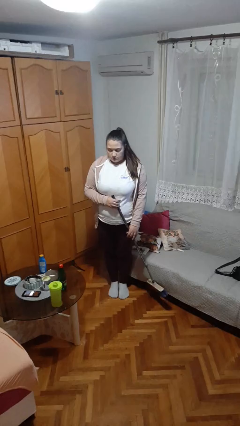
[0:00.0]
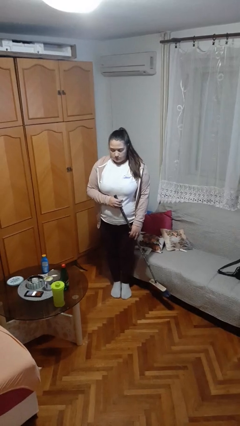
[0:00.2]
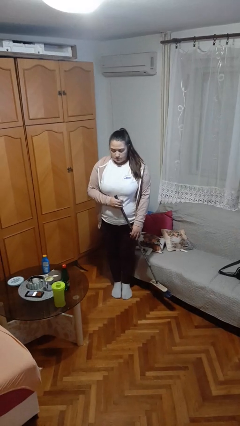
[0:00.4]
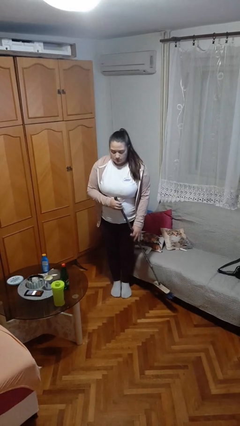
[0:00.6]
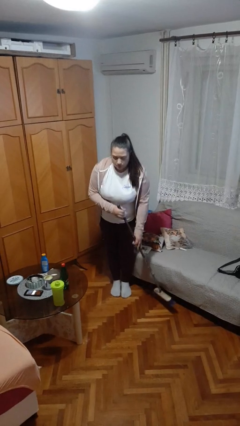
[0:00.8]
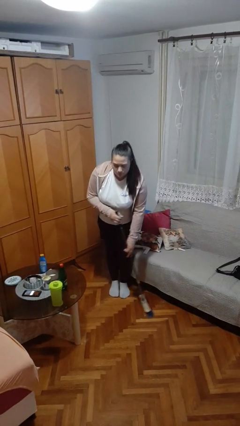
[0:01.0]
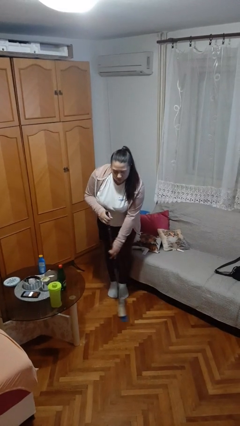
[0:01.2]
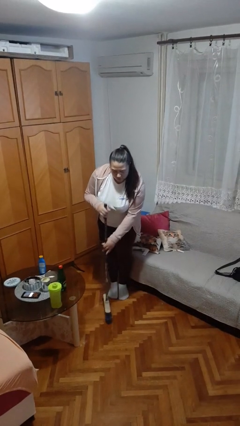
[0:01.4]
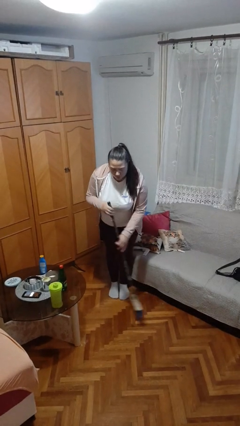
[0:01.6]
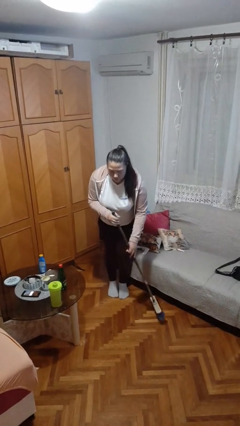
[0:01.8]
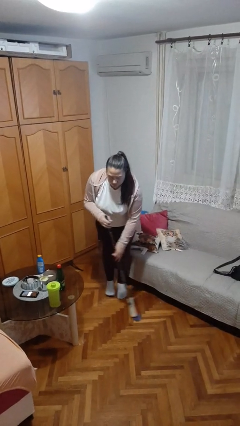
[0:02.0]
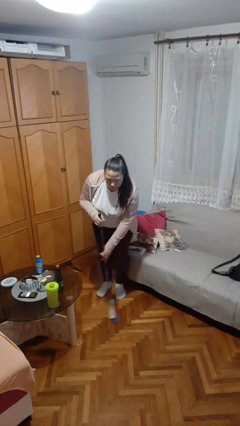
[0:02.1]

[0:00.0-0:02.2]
person sweeps floor

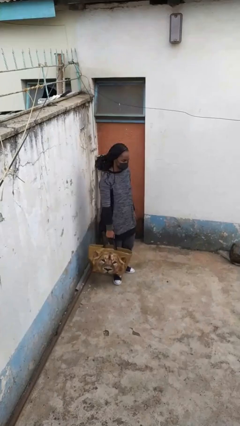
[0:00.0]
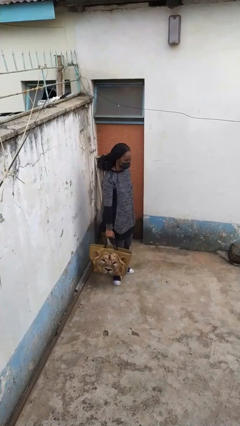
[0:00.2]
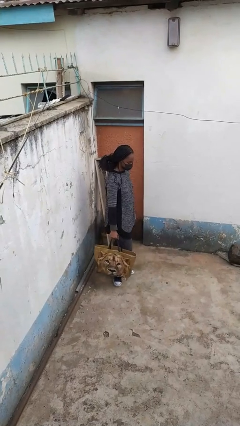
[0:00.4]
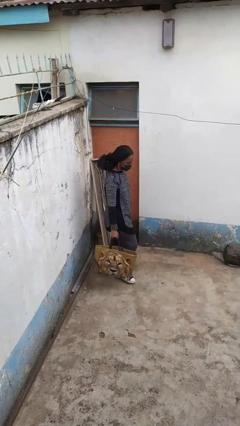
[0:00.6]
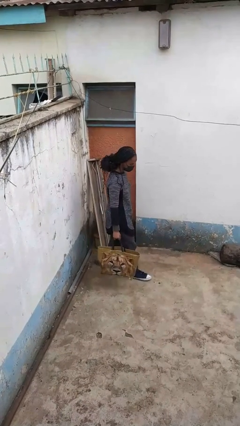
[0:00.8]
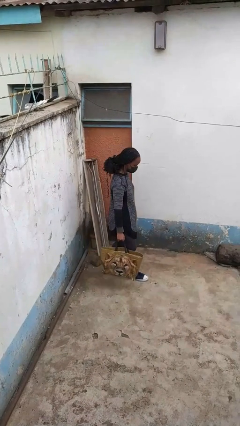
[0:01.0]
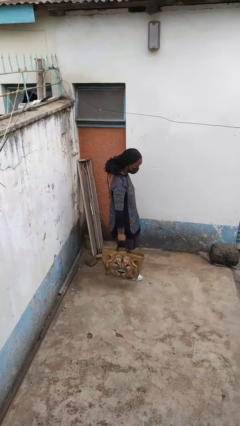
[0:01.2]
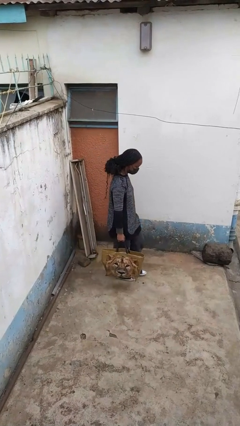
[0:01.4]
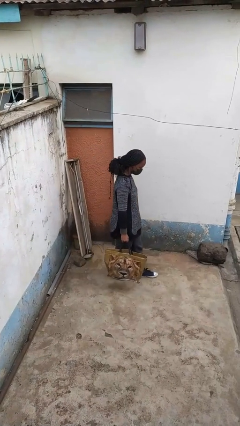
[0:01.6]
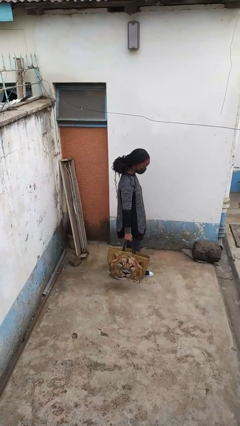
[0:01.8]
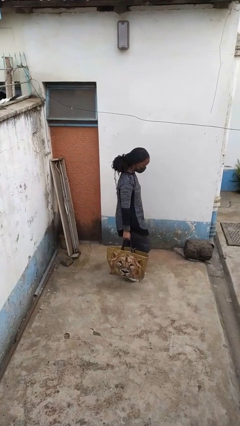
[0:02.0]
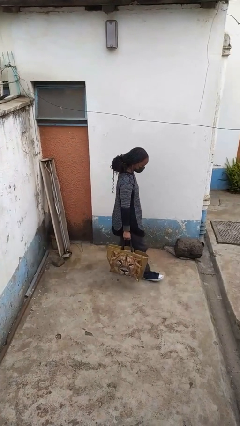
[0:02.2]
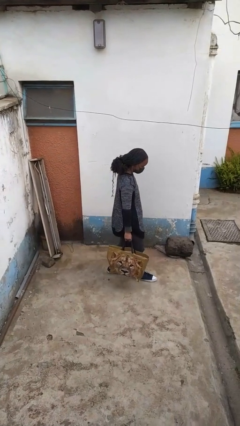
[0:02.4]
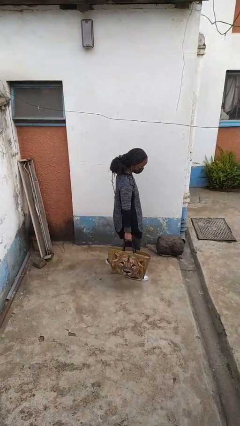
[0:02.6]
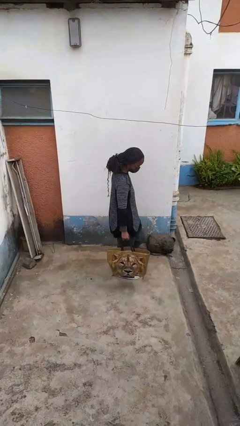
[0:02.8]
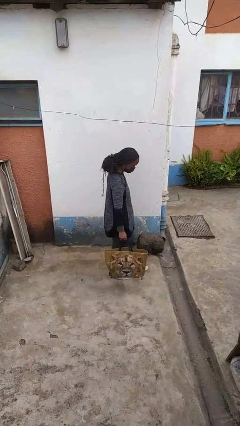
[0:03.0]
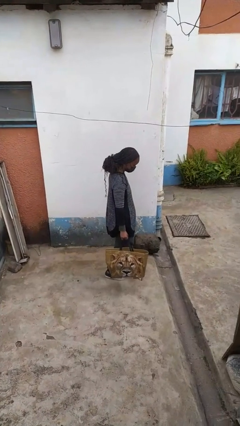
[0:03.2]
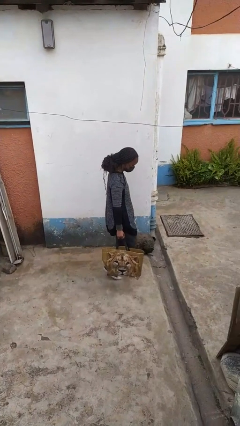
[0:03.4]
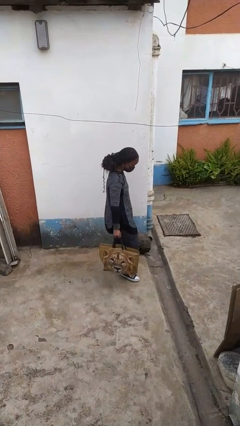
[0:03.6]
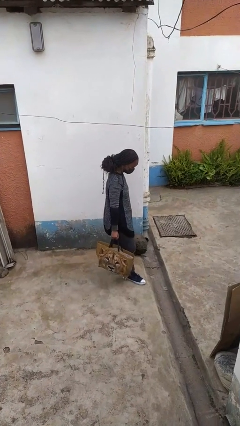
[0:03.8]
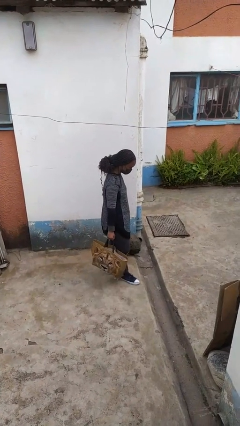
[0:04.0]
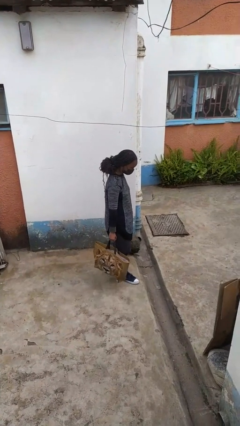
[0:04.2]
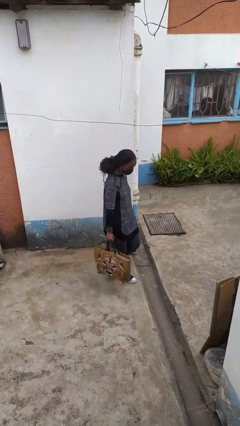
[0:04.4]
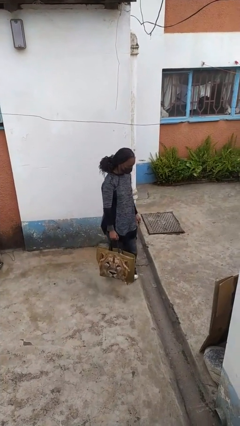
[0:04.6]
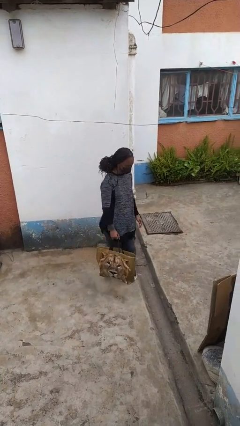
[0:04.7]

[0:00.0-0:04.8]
person carries groceries

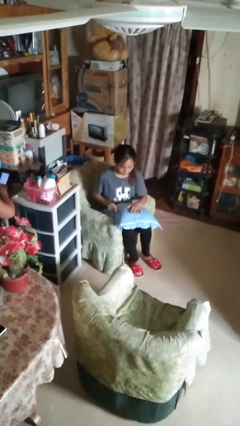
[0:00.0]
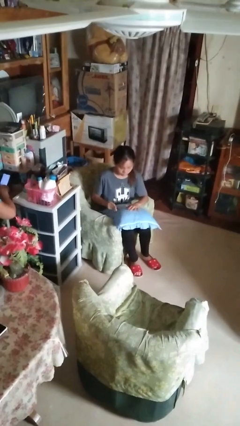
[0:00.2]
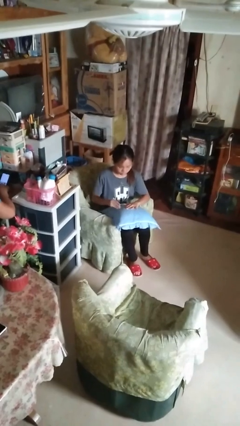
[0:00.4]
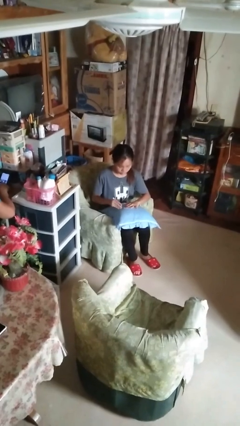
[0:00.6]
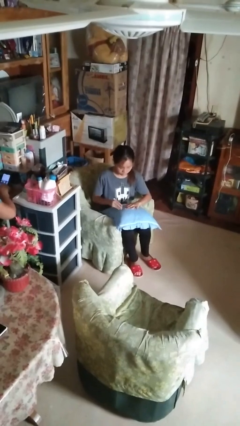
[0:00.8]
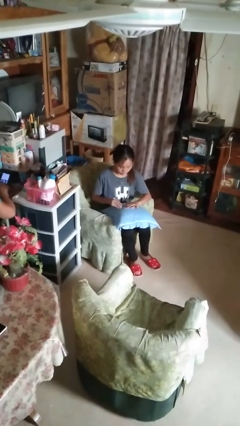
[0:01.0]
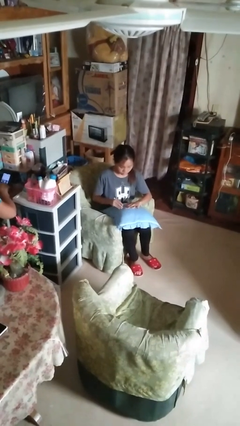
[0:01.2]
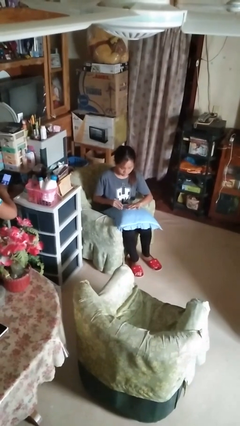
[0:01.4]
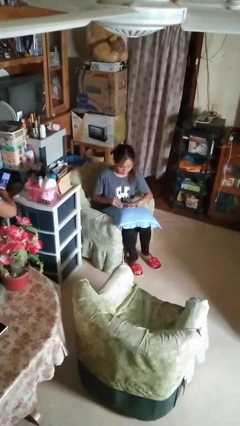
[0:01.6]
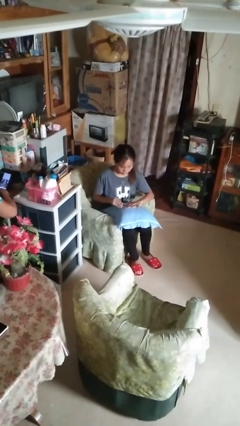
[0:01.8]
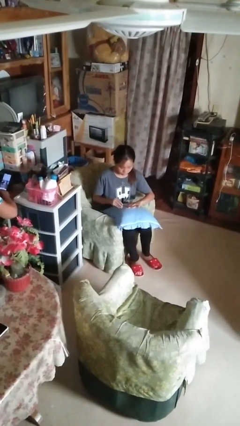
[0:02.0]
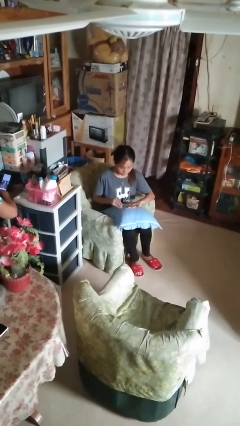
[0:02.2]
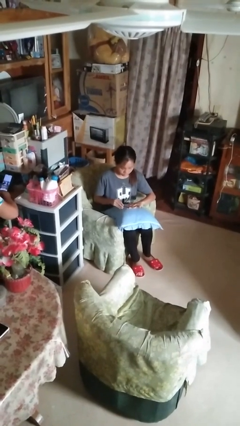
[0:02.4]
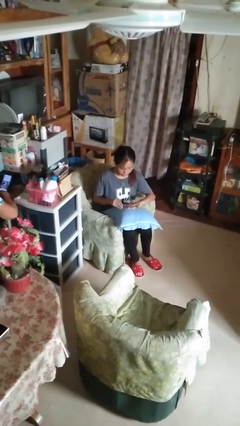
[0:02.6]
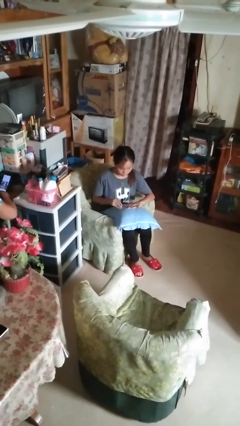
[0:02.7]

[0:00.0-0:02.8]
person files fingernails

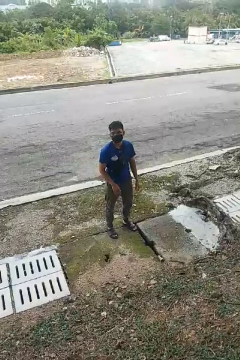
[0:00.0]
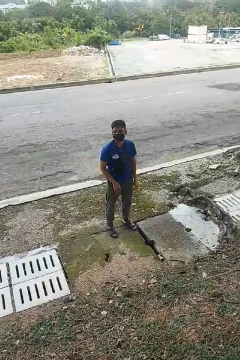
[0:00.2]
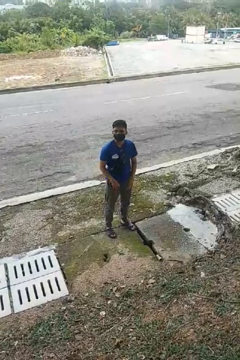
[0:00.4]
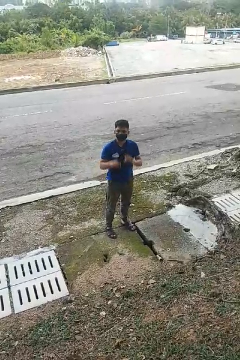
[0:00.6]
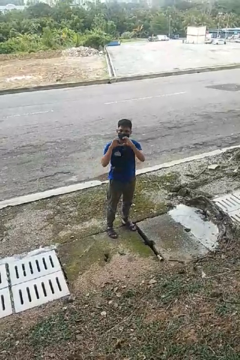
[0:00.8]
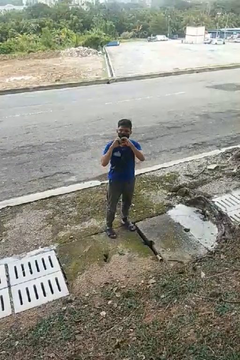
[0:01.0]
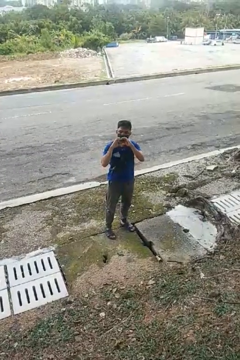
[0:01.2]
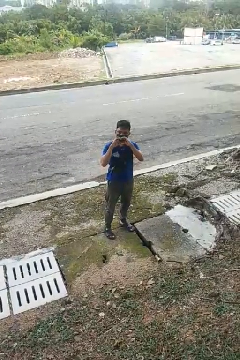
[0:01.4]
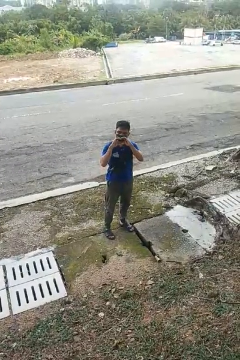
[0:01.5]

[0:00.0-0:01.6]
person gestures heart

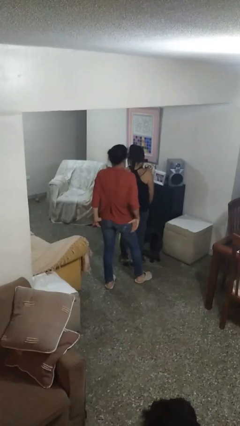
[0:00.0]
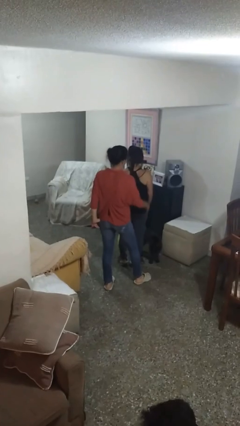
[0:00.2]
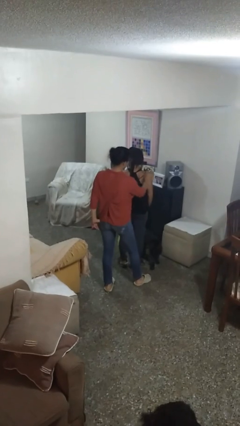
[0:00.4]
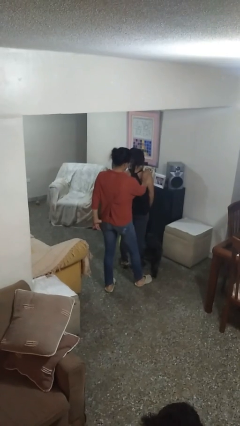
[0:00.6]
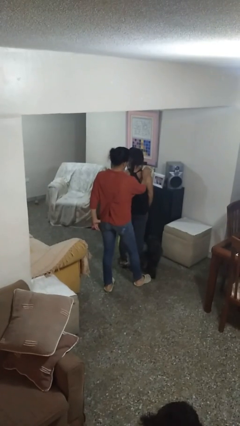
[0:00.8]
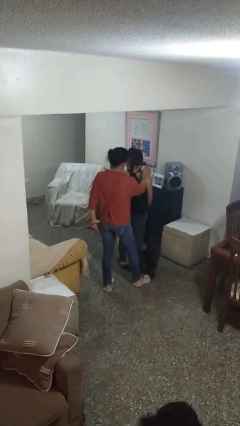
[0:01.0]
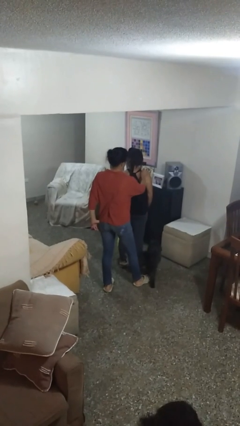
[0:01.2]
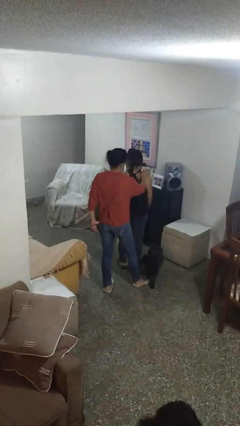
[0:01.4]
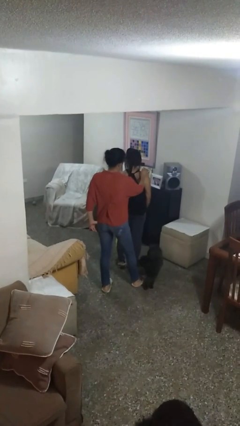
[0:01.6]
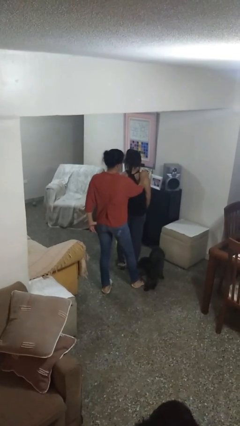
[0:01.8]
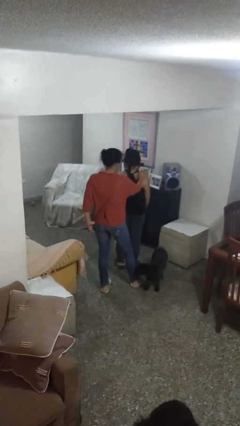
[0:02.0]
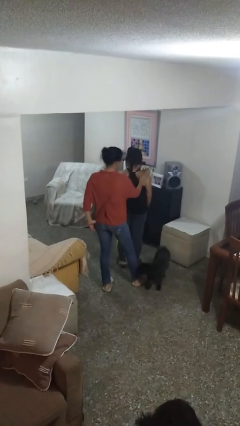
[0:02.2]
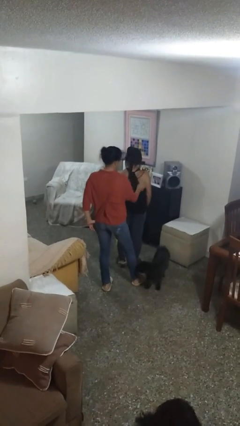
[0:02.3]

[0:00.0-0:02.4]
person touches back of person

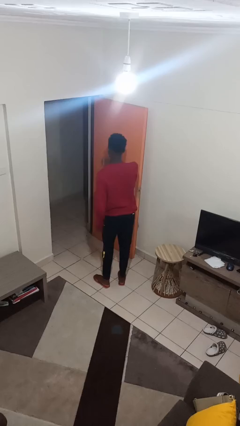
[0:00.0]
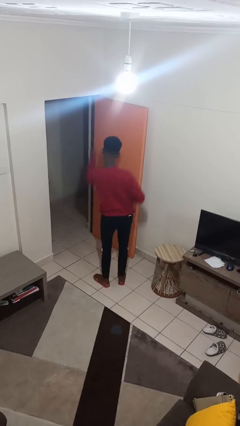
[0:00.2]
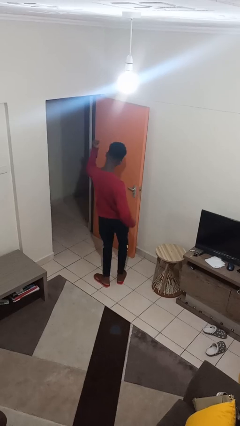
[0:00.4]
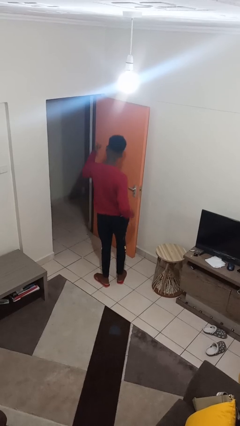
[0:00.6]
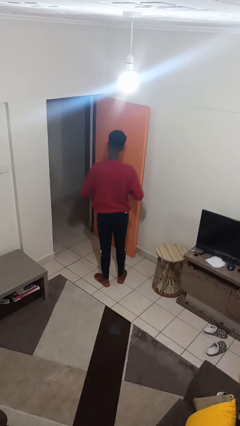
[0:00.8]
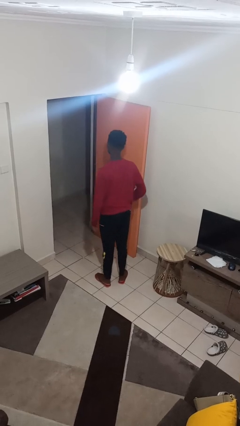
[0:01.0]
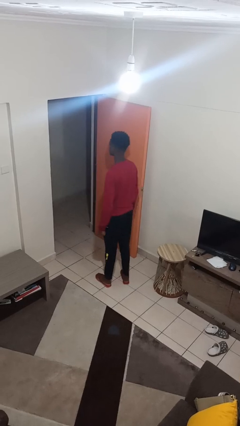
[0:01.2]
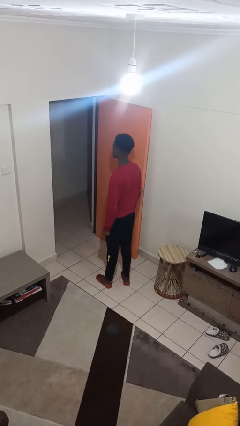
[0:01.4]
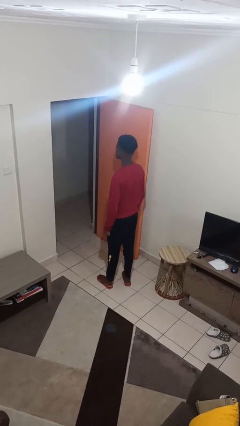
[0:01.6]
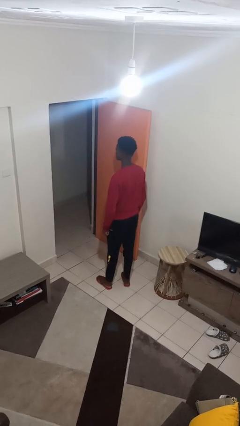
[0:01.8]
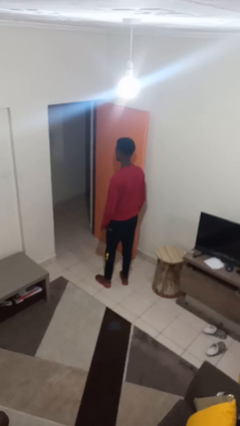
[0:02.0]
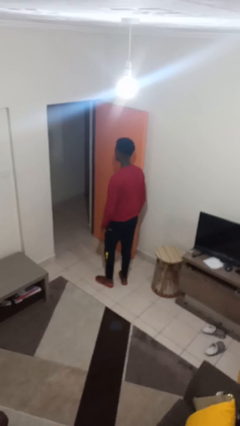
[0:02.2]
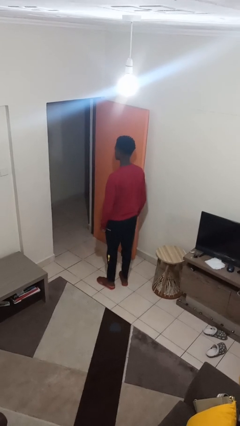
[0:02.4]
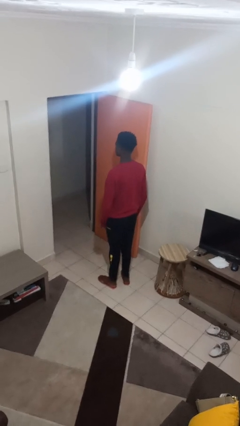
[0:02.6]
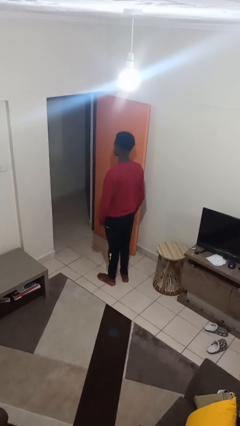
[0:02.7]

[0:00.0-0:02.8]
person punches

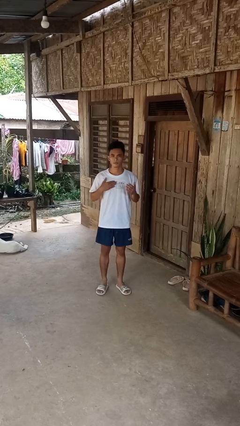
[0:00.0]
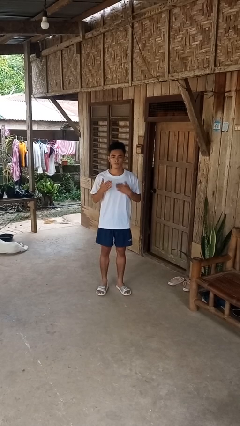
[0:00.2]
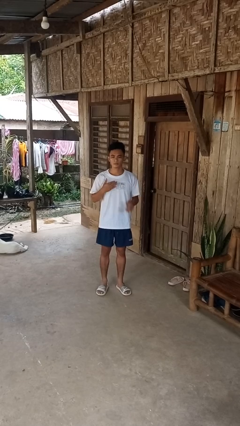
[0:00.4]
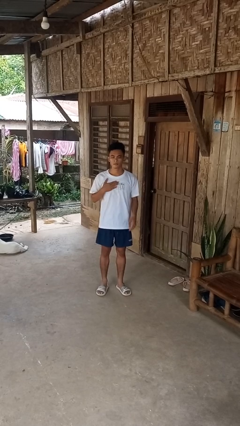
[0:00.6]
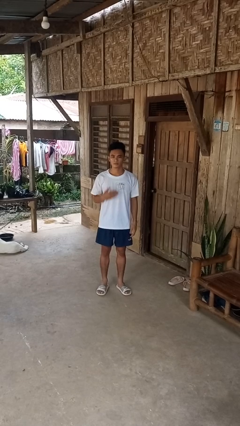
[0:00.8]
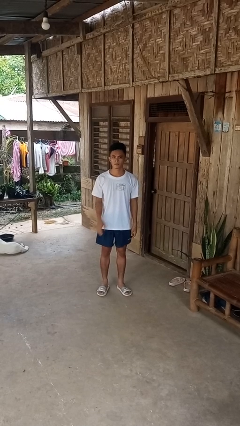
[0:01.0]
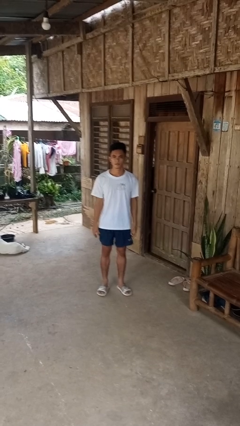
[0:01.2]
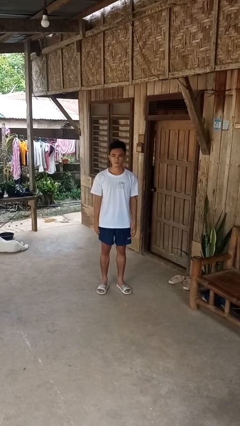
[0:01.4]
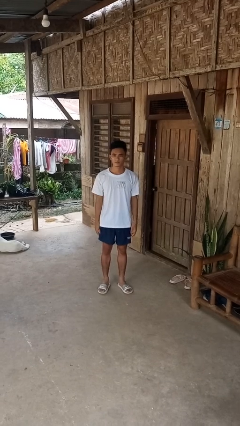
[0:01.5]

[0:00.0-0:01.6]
person drums on chest
